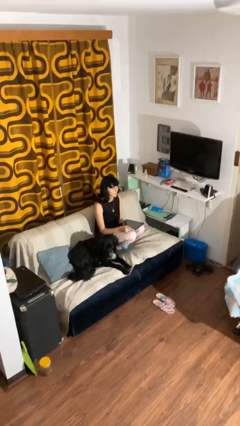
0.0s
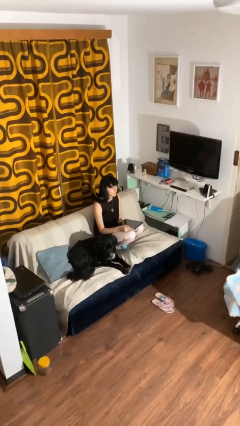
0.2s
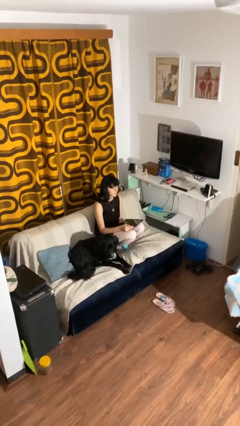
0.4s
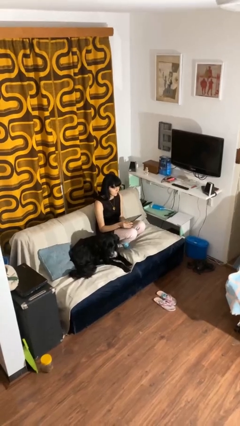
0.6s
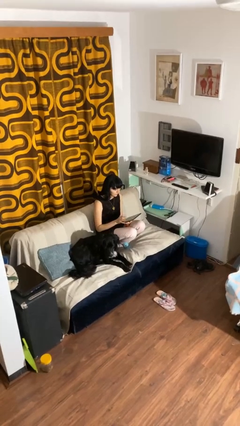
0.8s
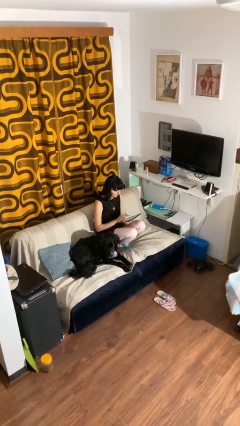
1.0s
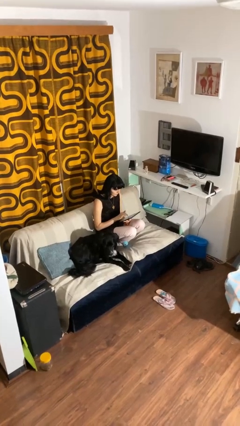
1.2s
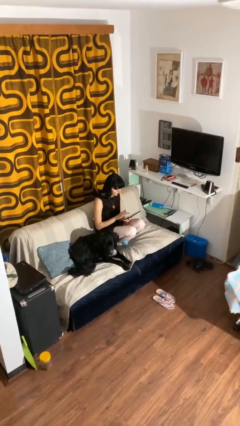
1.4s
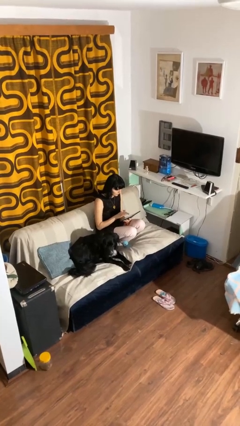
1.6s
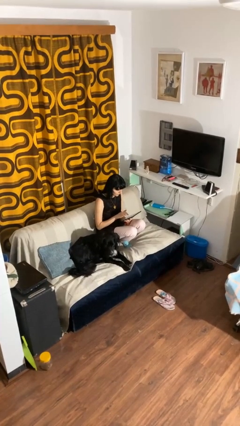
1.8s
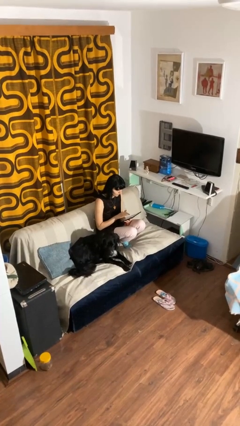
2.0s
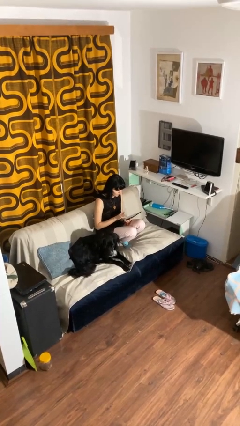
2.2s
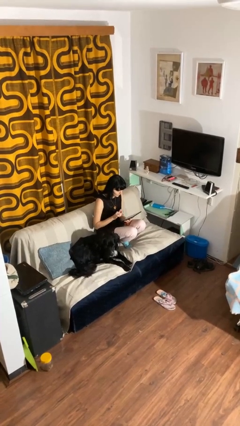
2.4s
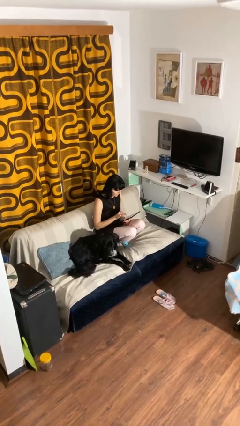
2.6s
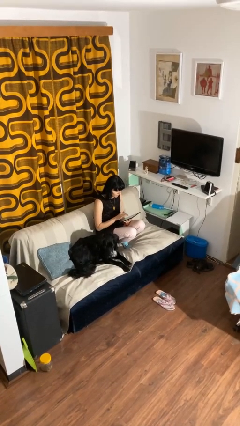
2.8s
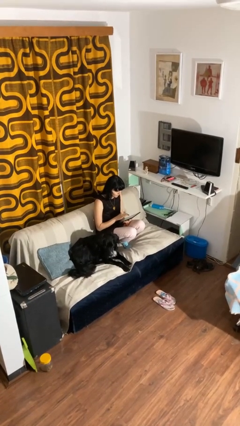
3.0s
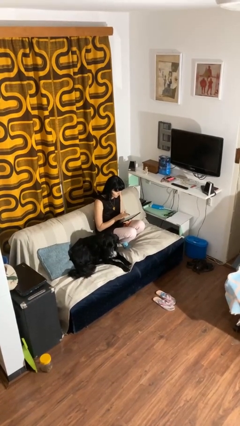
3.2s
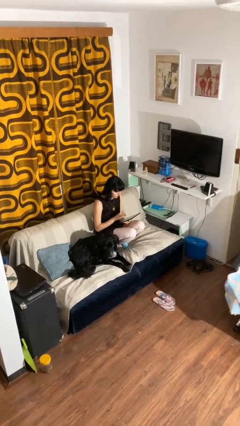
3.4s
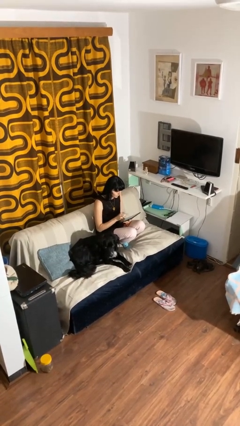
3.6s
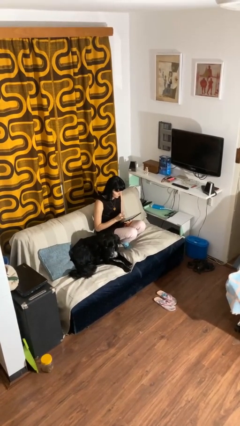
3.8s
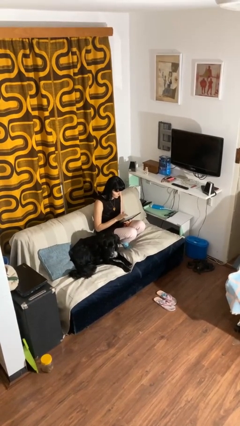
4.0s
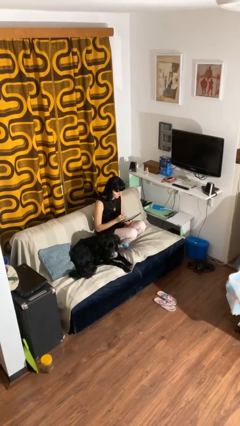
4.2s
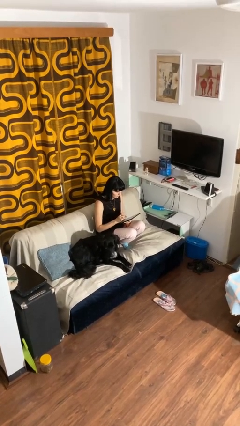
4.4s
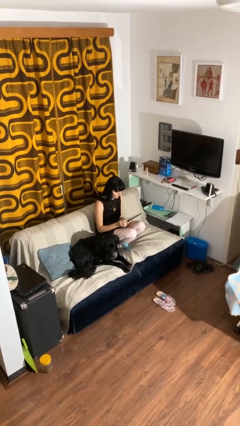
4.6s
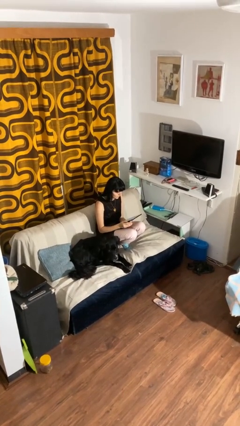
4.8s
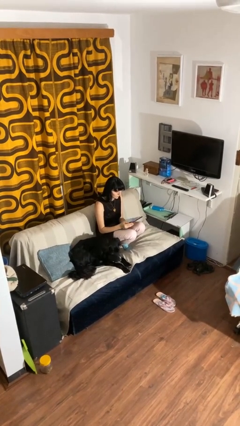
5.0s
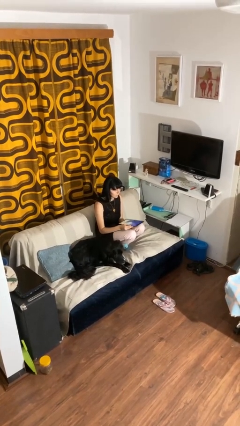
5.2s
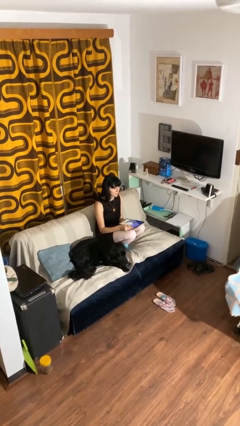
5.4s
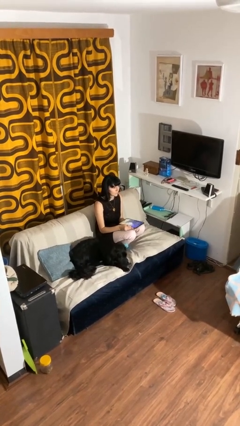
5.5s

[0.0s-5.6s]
person interacts with tablet

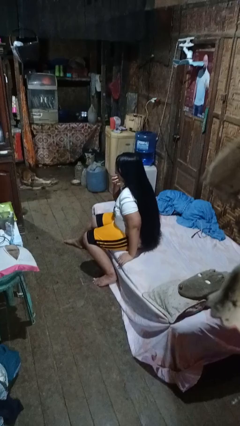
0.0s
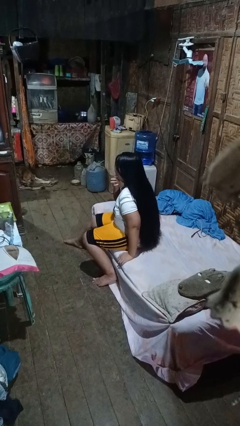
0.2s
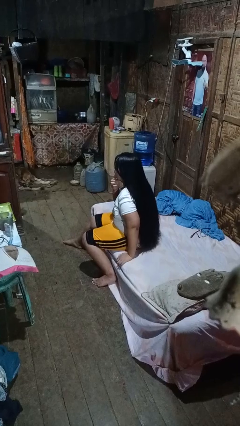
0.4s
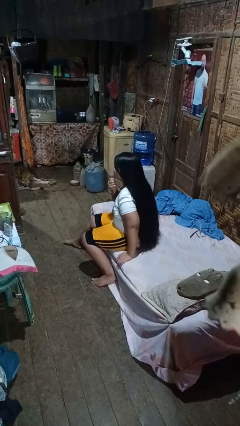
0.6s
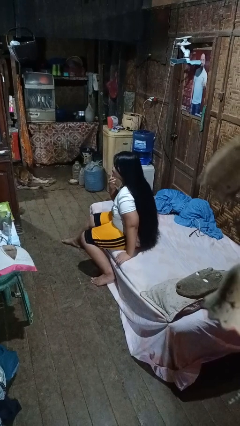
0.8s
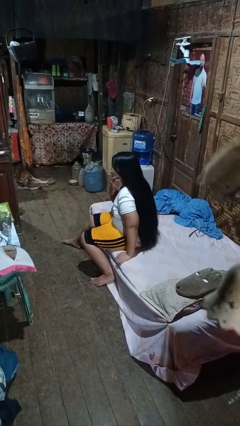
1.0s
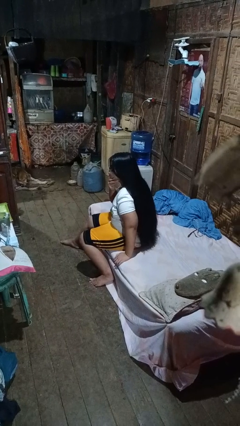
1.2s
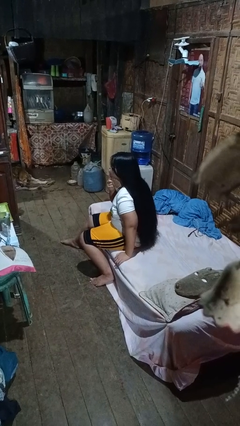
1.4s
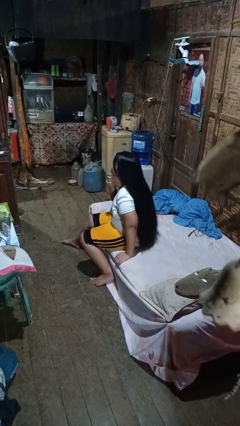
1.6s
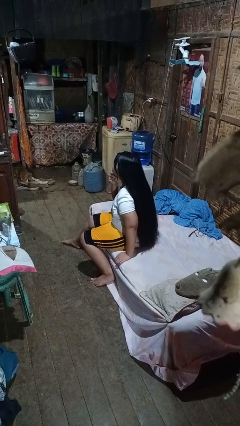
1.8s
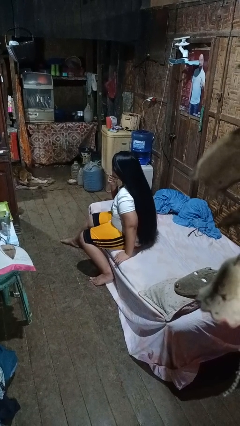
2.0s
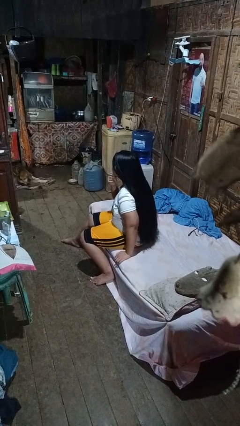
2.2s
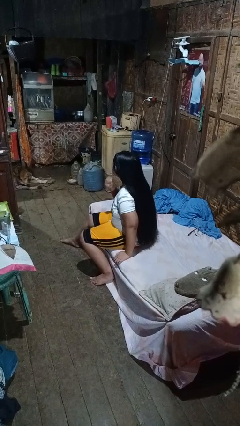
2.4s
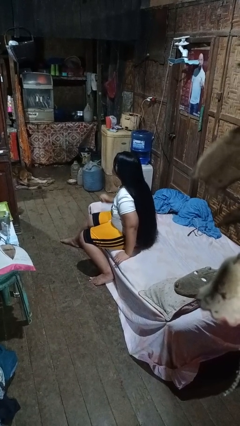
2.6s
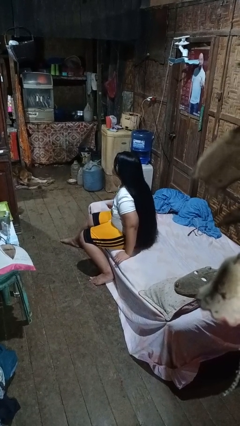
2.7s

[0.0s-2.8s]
person strokes chin

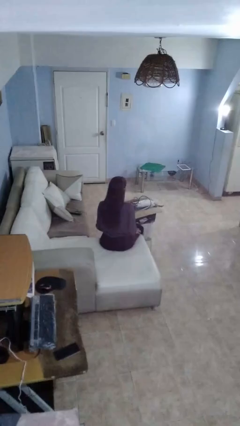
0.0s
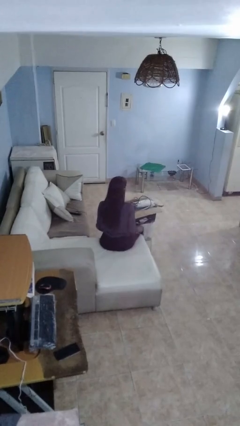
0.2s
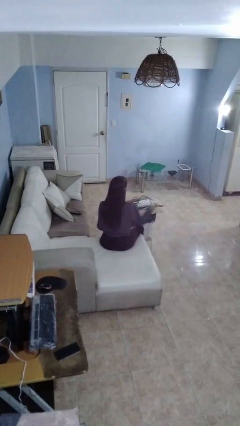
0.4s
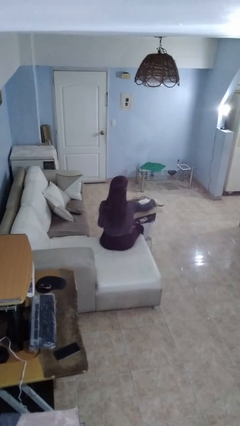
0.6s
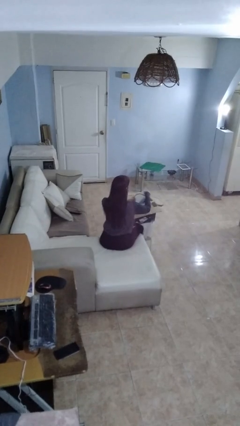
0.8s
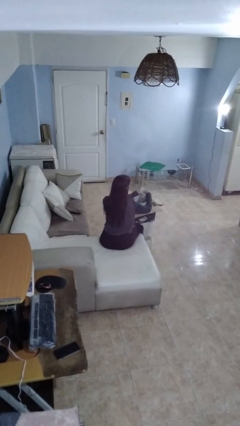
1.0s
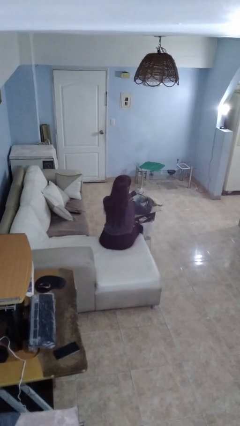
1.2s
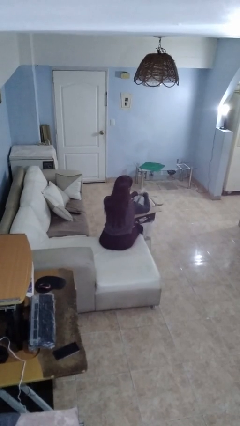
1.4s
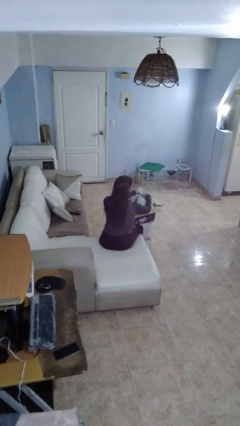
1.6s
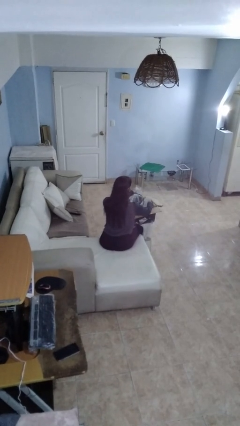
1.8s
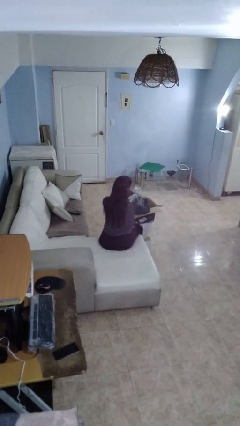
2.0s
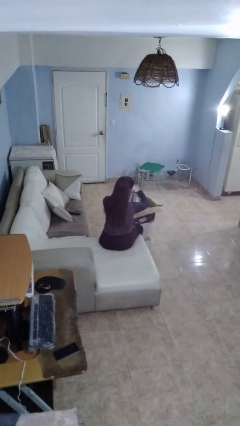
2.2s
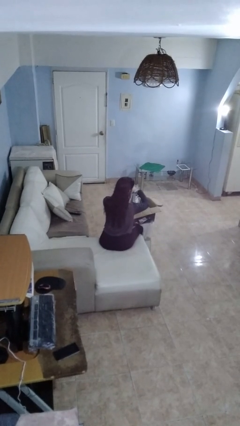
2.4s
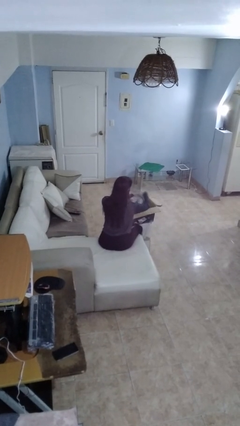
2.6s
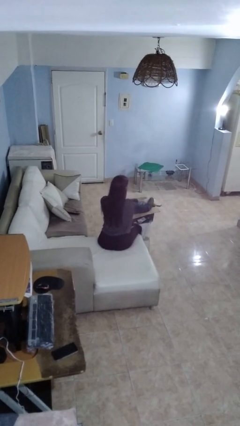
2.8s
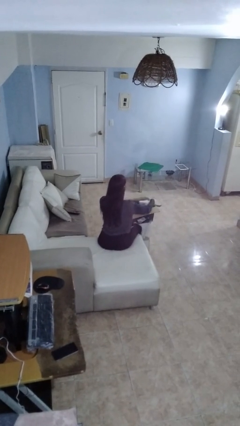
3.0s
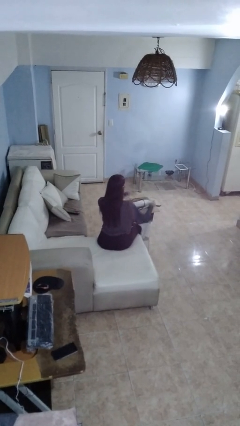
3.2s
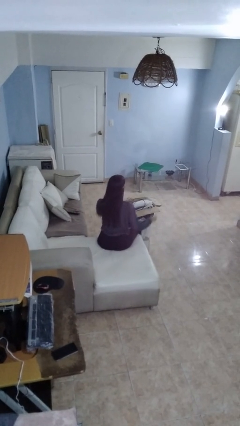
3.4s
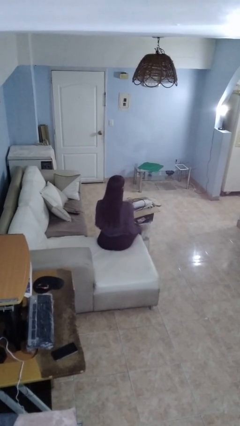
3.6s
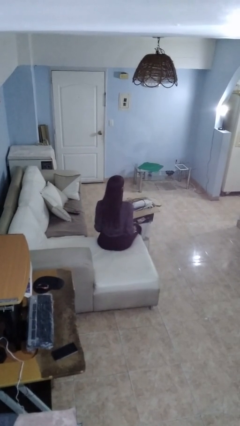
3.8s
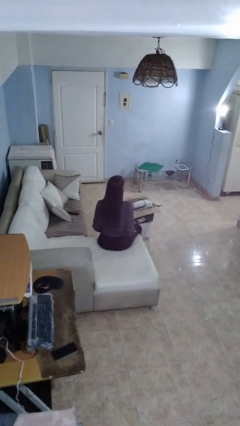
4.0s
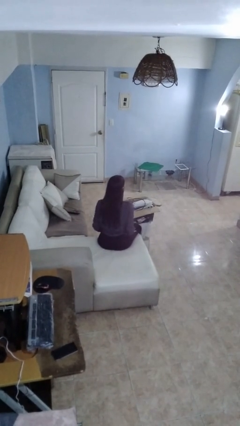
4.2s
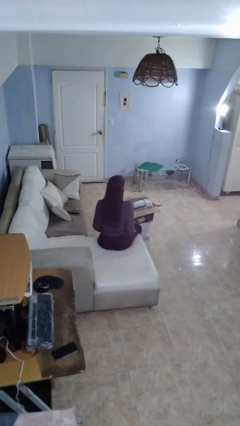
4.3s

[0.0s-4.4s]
person searches in box

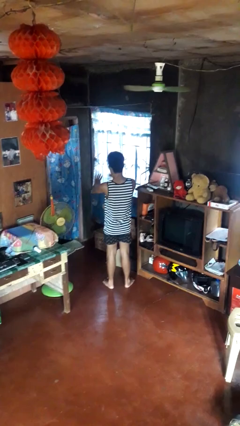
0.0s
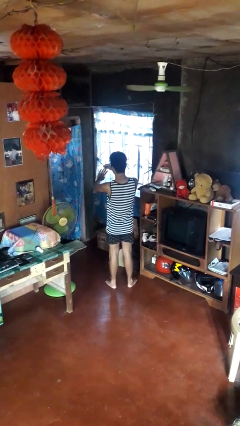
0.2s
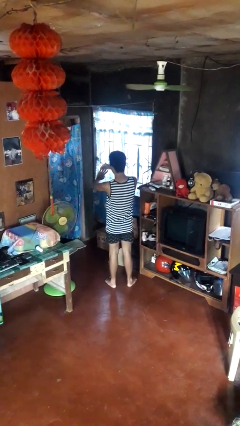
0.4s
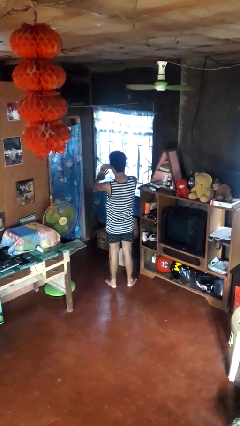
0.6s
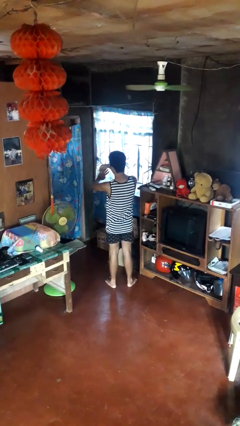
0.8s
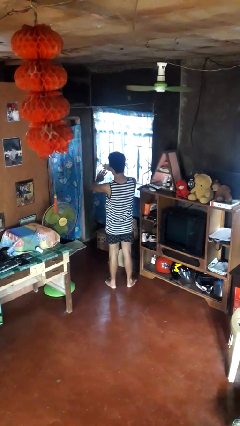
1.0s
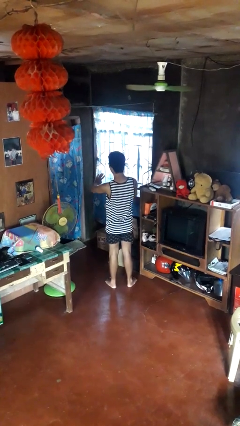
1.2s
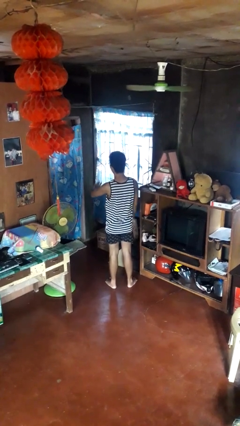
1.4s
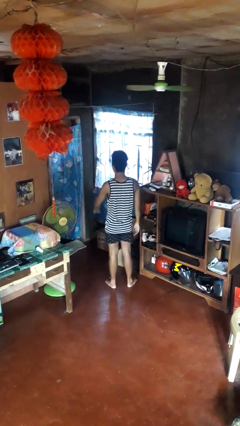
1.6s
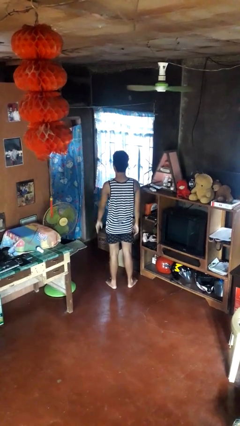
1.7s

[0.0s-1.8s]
person puts on ring

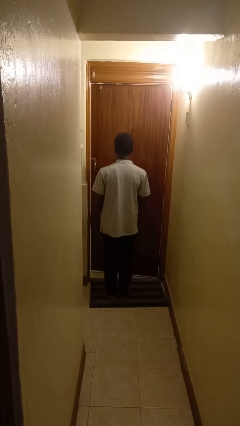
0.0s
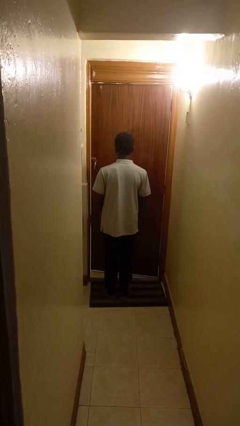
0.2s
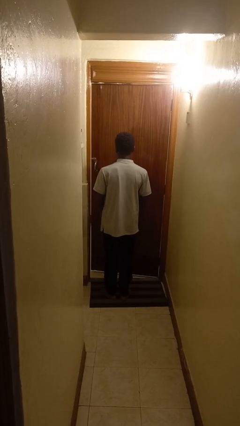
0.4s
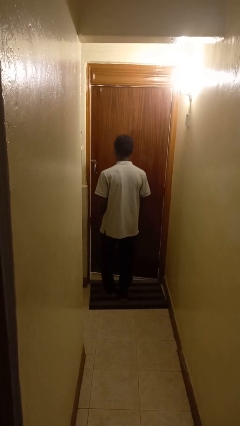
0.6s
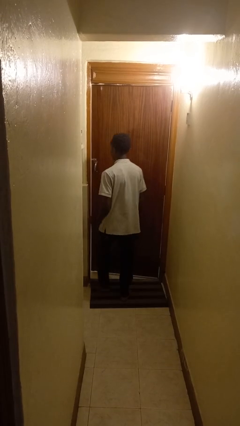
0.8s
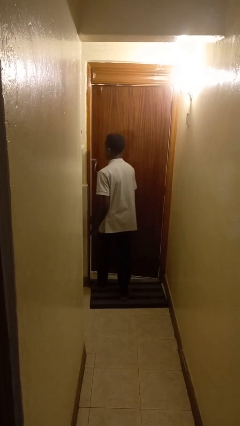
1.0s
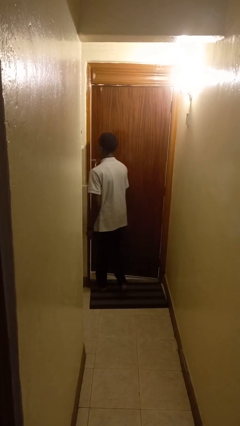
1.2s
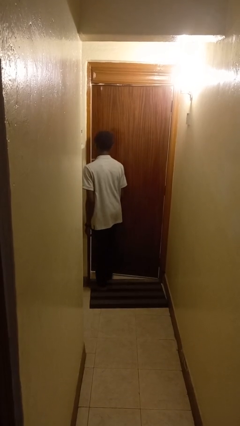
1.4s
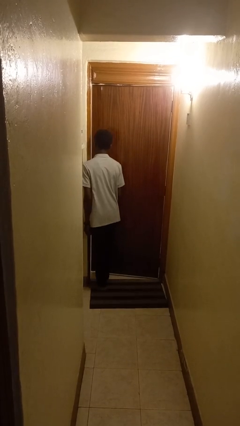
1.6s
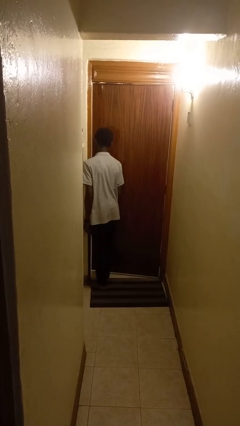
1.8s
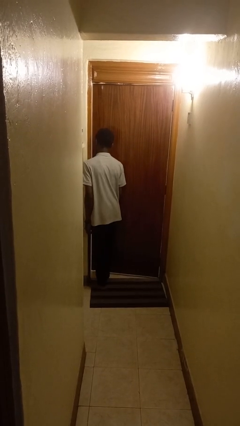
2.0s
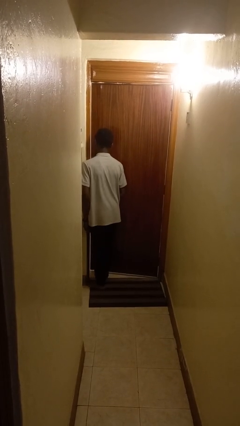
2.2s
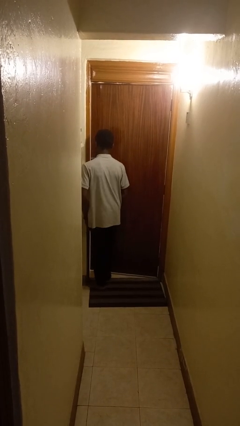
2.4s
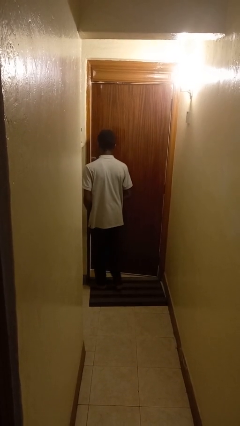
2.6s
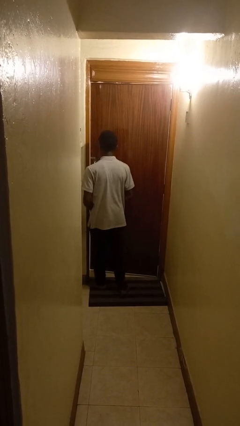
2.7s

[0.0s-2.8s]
person bumps into wall

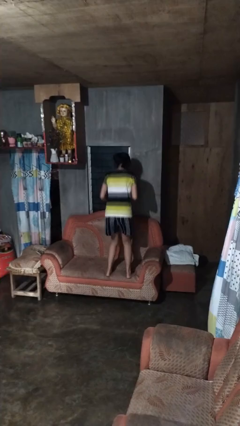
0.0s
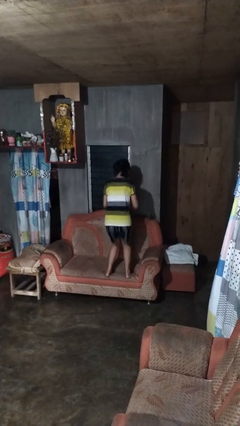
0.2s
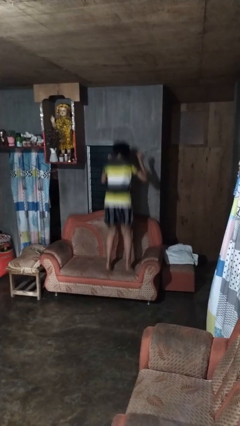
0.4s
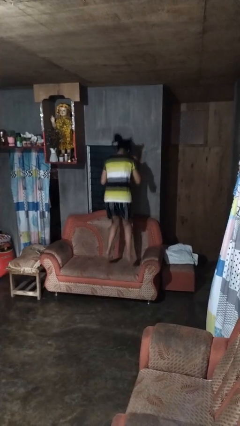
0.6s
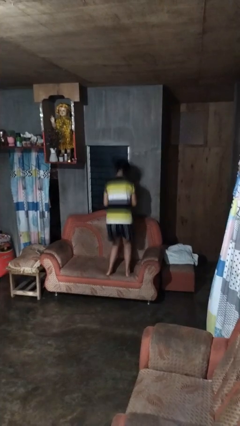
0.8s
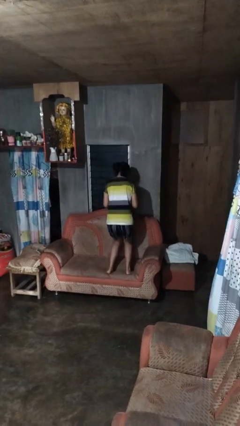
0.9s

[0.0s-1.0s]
person jumps on couch
